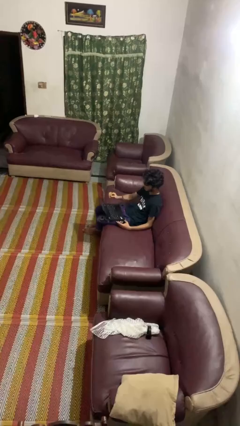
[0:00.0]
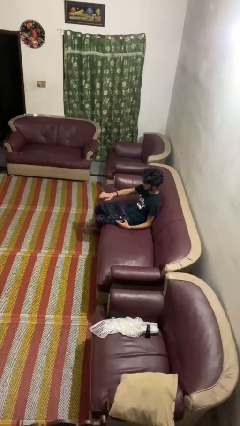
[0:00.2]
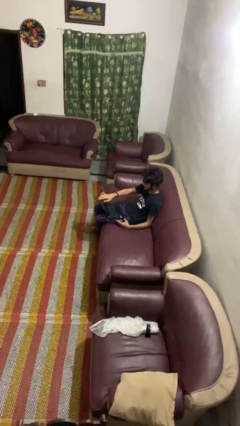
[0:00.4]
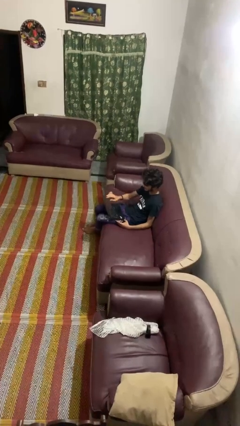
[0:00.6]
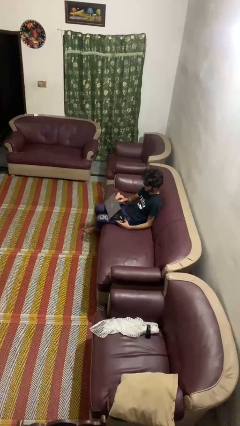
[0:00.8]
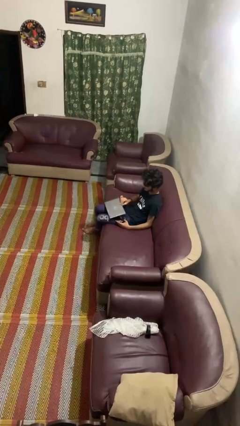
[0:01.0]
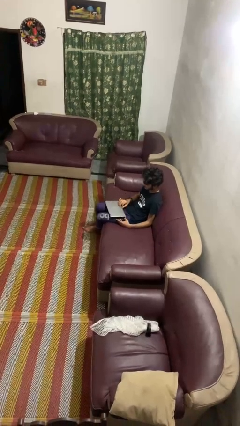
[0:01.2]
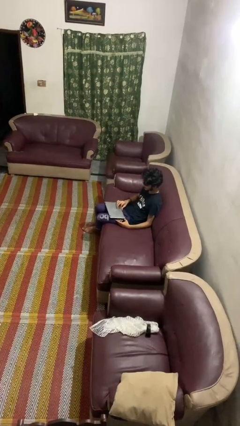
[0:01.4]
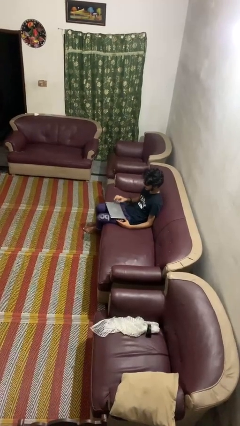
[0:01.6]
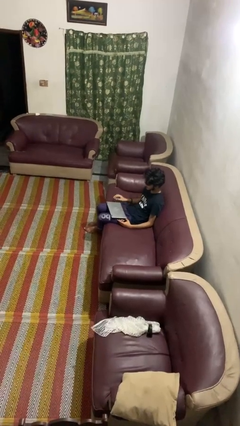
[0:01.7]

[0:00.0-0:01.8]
person closes laptop

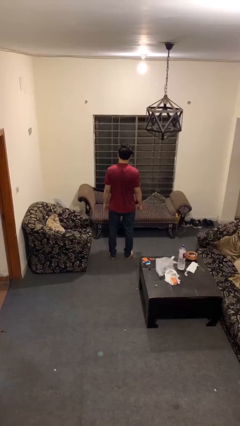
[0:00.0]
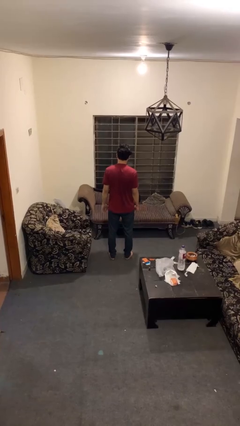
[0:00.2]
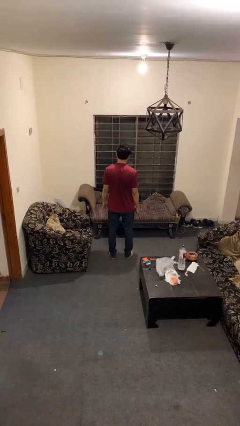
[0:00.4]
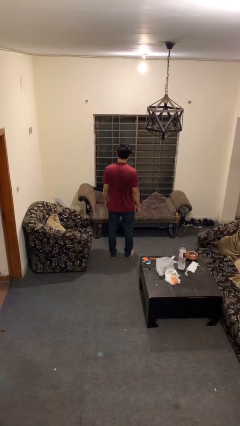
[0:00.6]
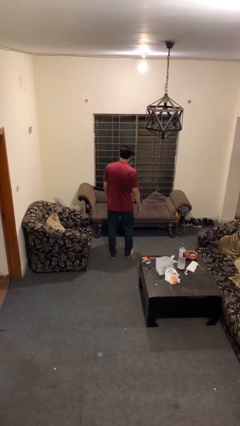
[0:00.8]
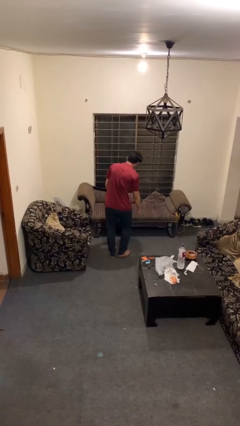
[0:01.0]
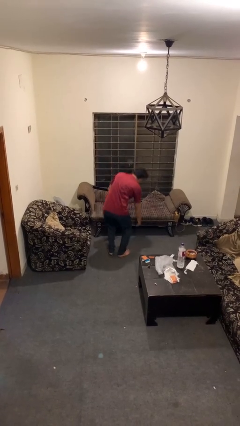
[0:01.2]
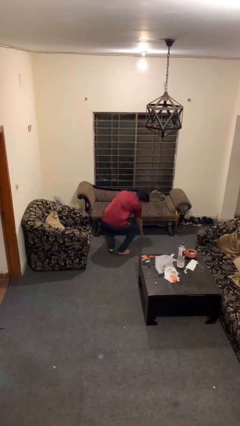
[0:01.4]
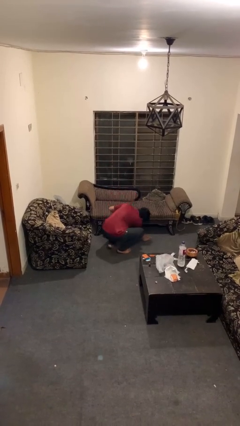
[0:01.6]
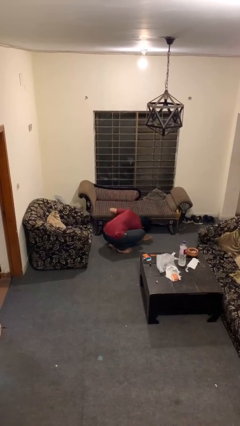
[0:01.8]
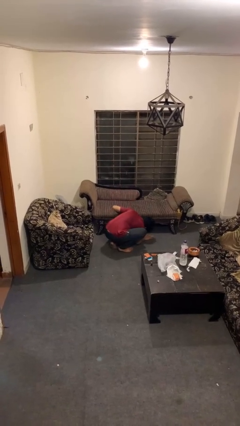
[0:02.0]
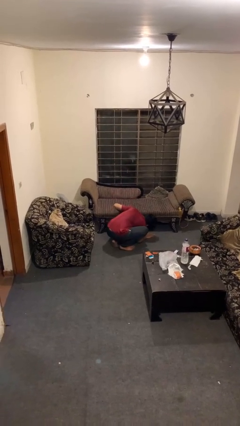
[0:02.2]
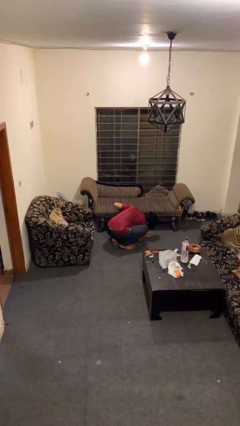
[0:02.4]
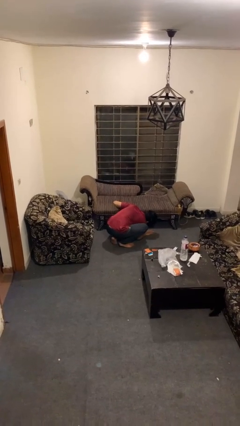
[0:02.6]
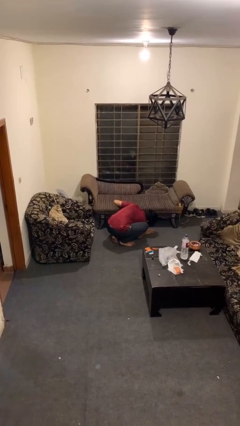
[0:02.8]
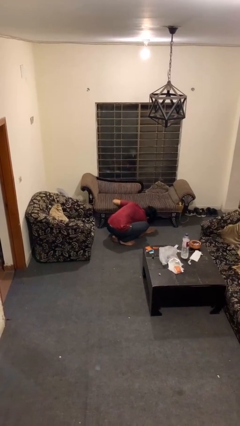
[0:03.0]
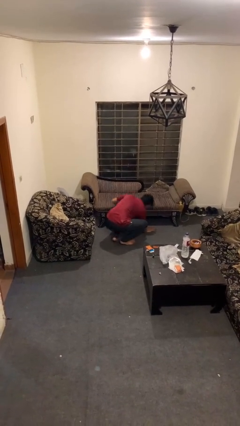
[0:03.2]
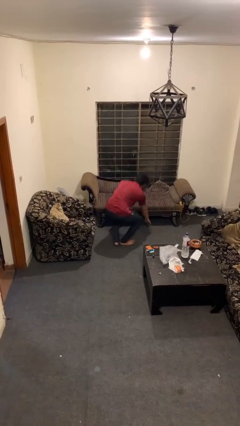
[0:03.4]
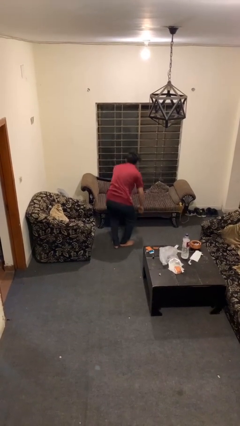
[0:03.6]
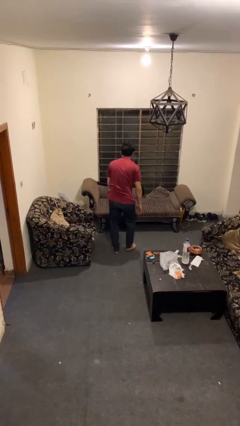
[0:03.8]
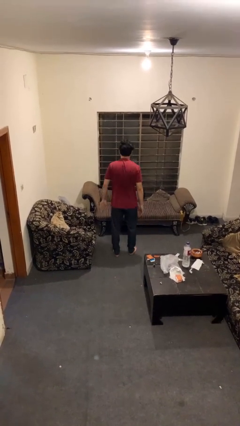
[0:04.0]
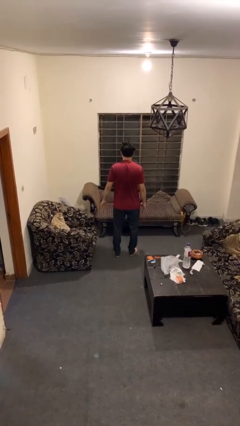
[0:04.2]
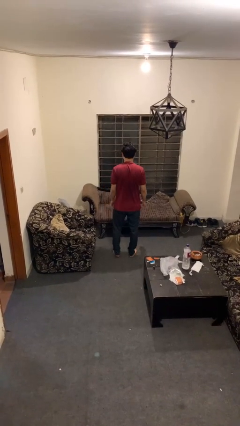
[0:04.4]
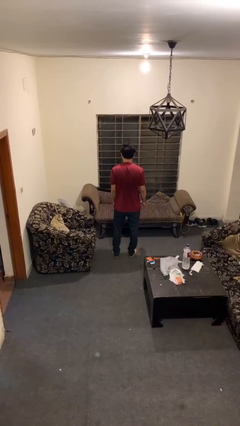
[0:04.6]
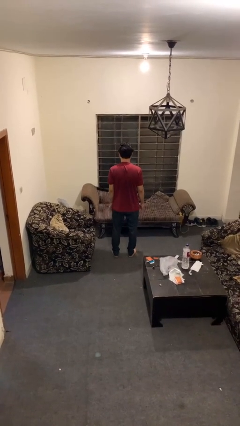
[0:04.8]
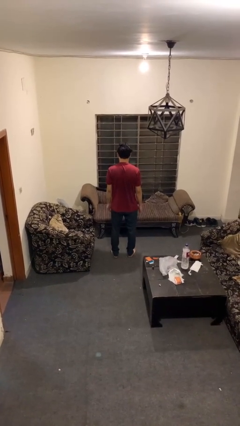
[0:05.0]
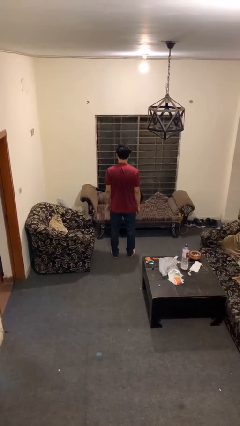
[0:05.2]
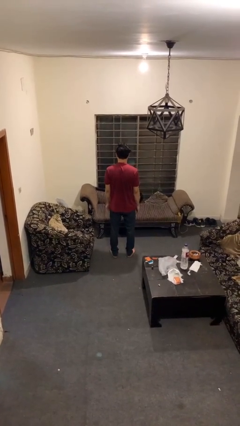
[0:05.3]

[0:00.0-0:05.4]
person searches under couch

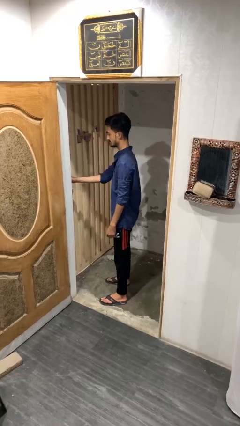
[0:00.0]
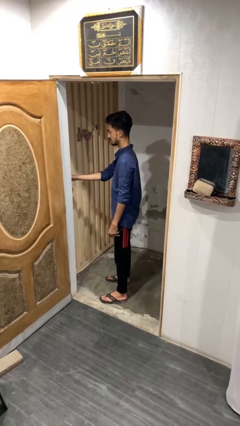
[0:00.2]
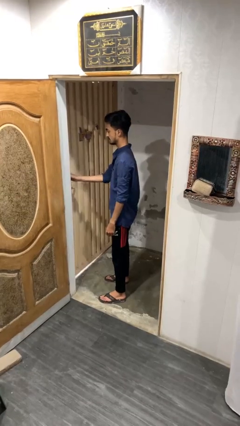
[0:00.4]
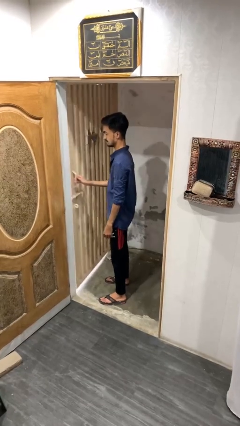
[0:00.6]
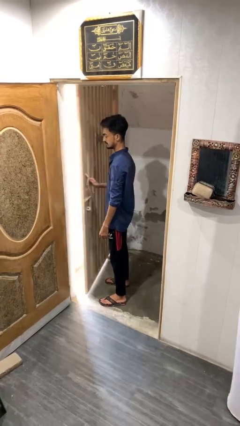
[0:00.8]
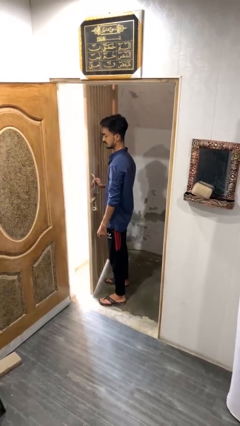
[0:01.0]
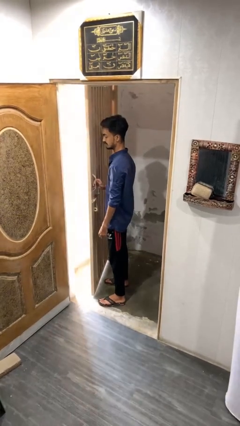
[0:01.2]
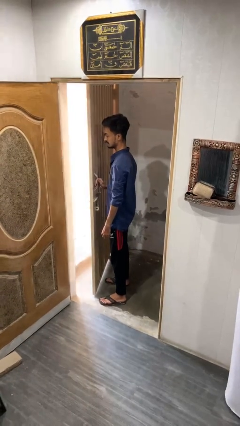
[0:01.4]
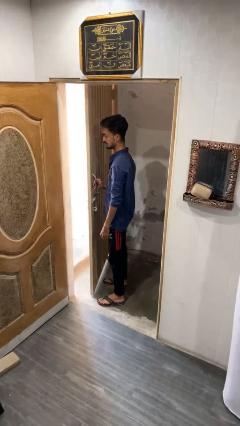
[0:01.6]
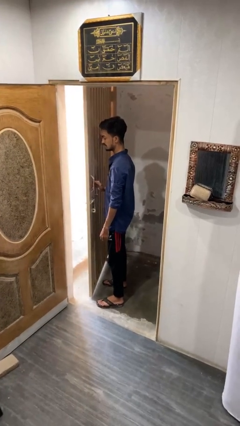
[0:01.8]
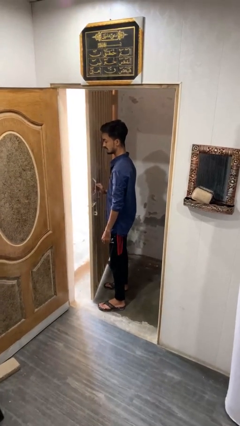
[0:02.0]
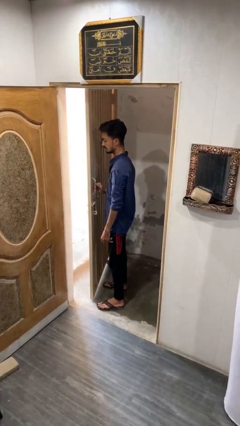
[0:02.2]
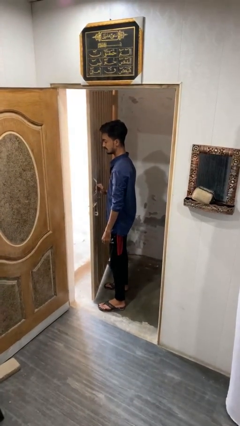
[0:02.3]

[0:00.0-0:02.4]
person opens gate

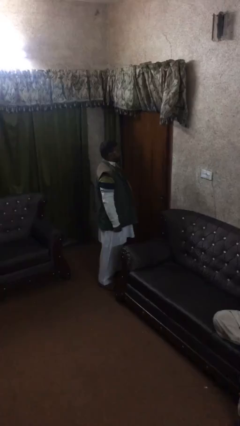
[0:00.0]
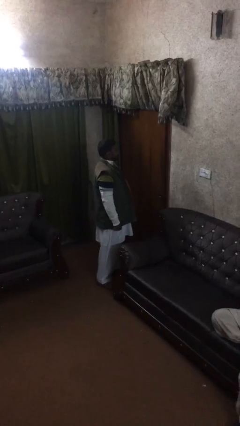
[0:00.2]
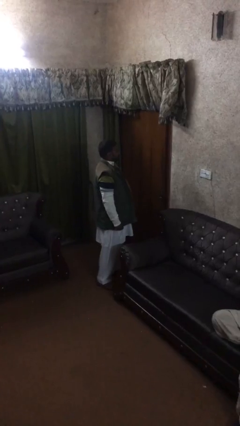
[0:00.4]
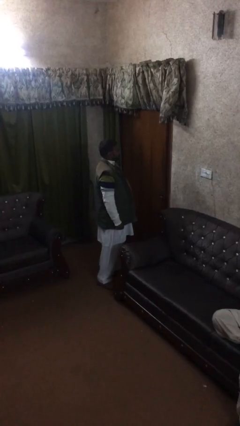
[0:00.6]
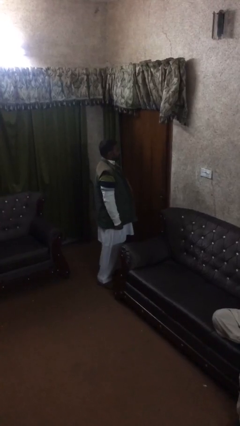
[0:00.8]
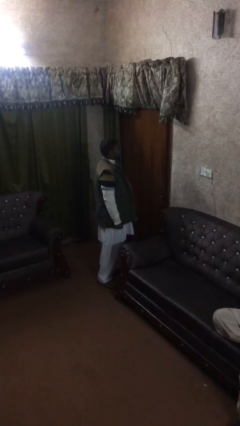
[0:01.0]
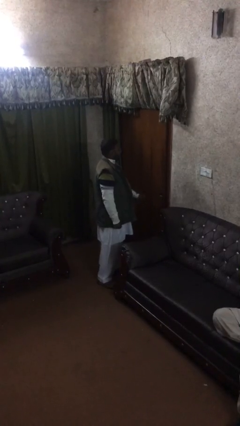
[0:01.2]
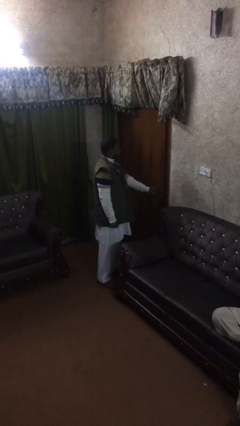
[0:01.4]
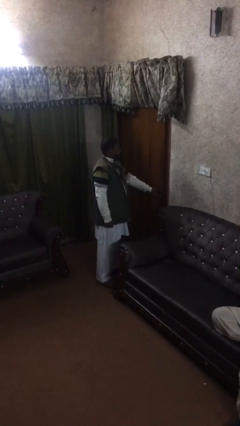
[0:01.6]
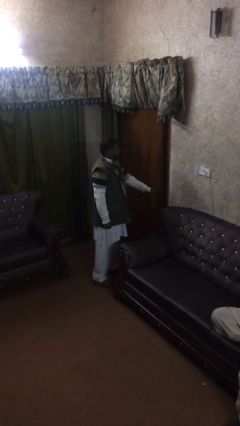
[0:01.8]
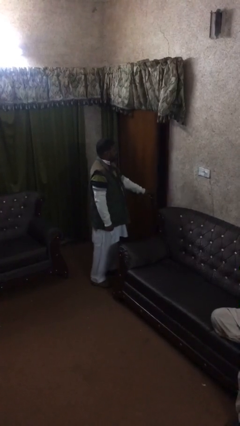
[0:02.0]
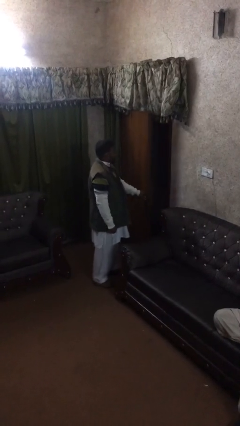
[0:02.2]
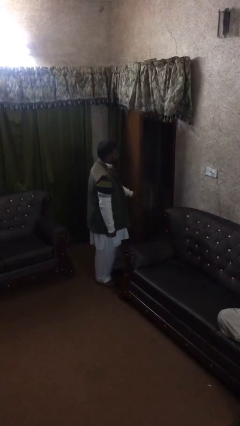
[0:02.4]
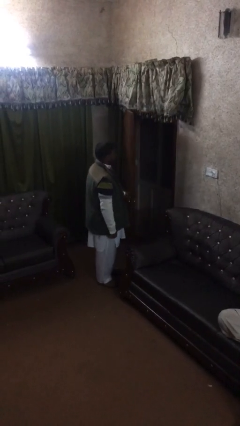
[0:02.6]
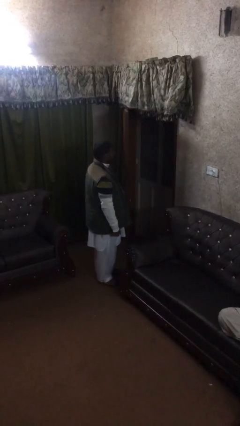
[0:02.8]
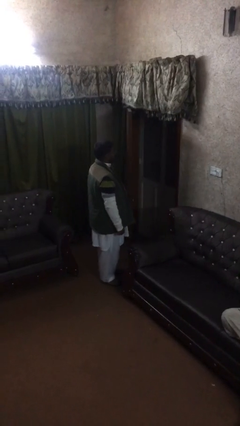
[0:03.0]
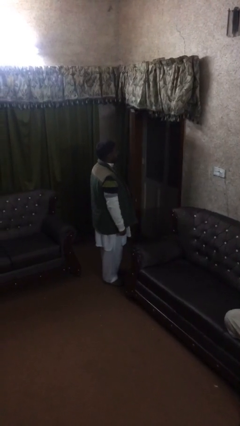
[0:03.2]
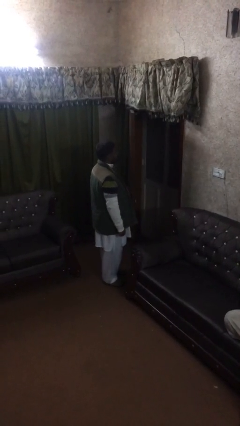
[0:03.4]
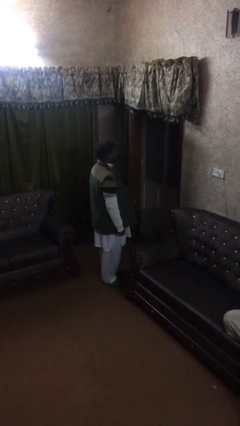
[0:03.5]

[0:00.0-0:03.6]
person opens facility door

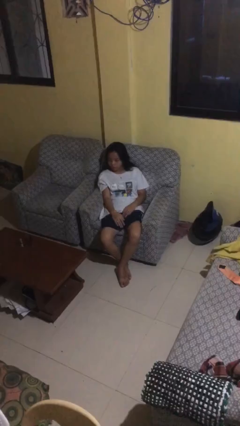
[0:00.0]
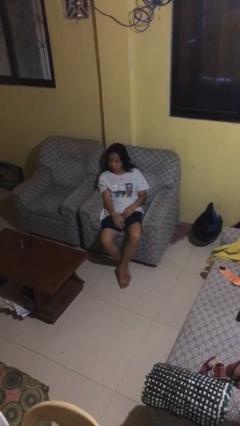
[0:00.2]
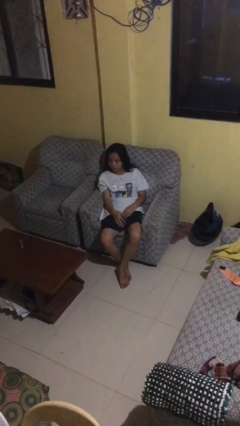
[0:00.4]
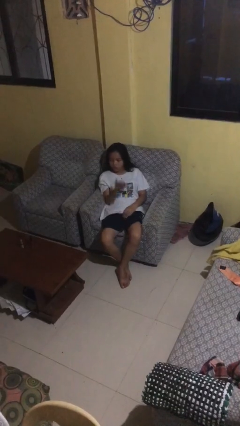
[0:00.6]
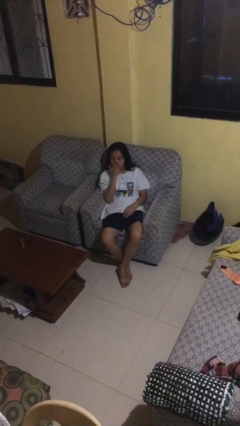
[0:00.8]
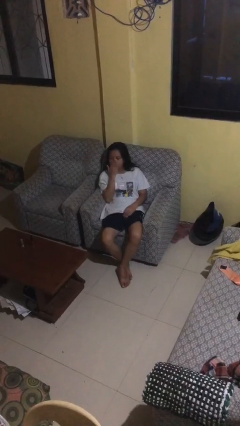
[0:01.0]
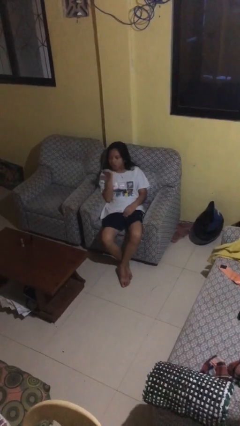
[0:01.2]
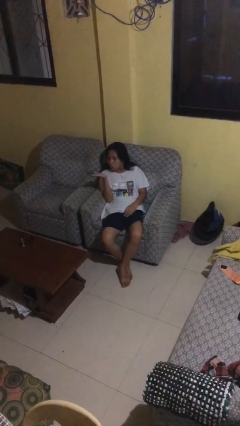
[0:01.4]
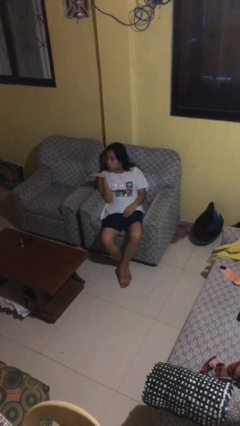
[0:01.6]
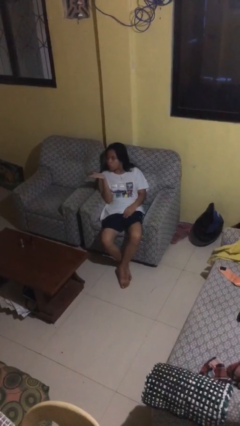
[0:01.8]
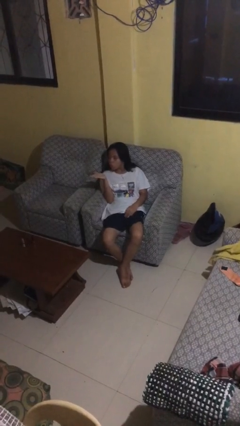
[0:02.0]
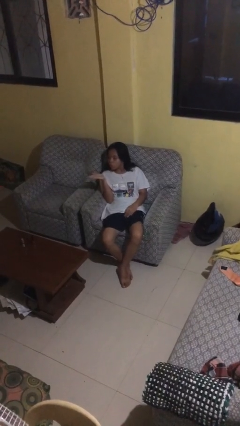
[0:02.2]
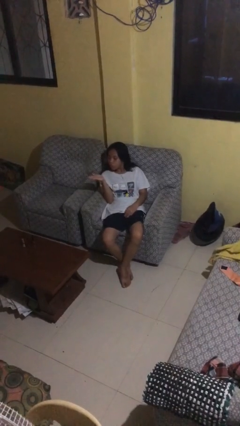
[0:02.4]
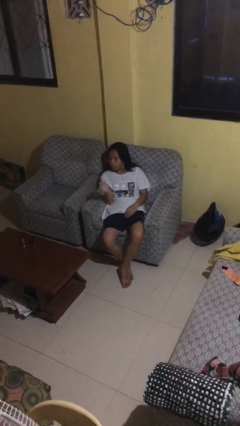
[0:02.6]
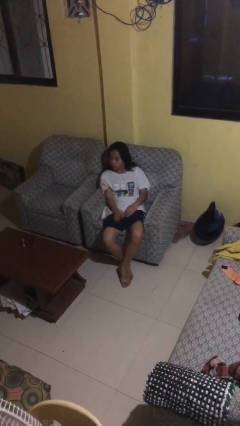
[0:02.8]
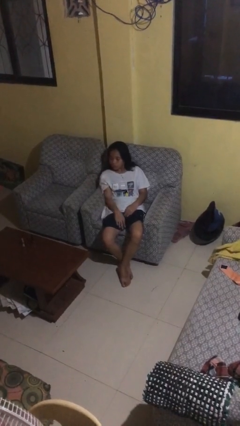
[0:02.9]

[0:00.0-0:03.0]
person gestures blow kiss

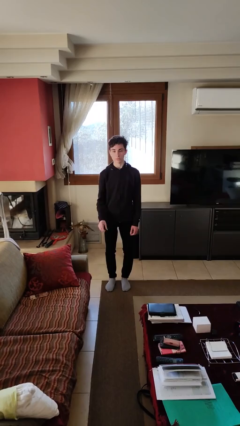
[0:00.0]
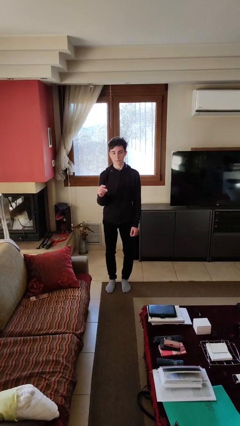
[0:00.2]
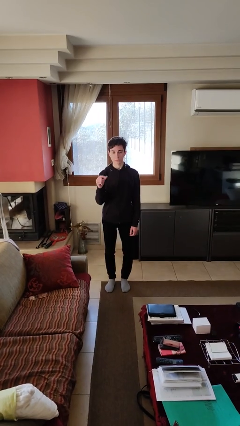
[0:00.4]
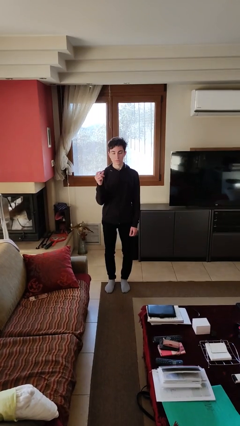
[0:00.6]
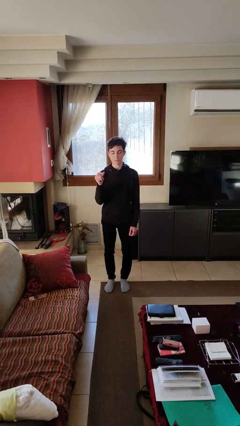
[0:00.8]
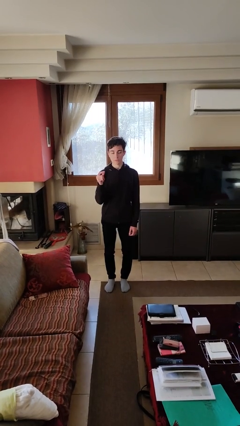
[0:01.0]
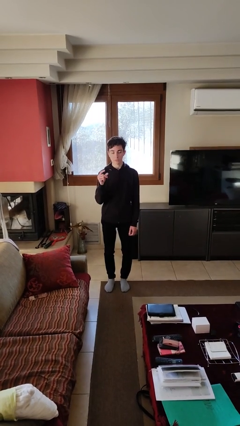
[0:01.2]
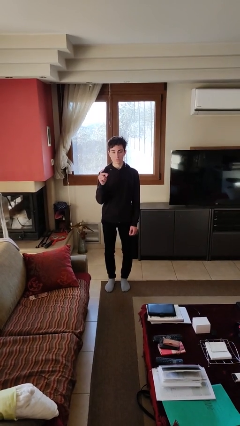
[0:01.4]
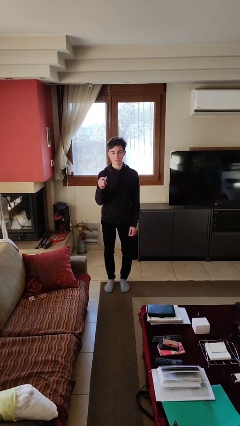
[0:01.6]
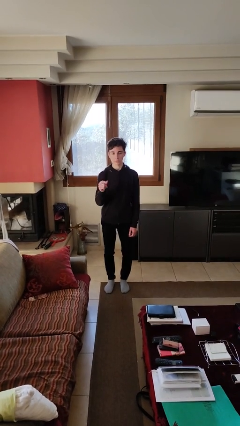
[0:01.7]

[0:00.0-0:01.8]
person snaps fingers
